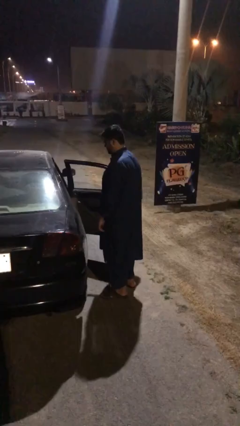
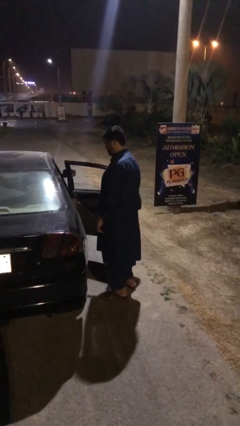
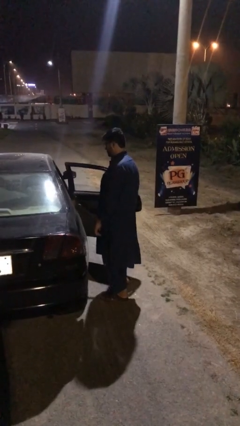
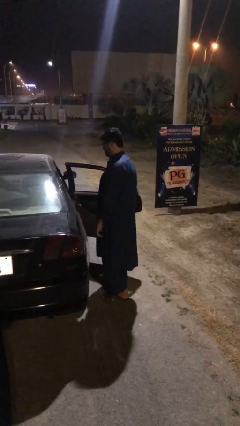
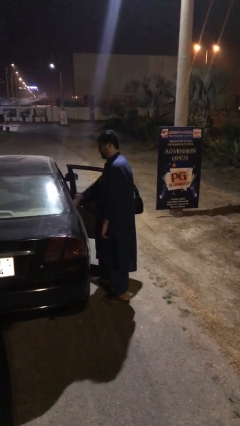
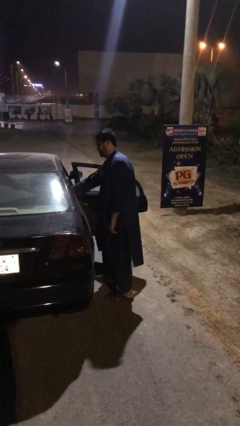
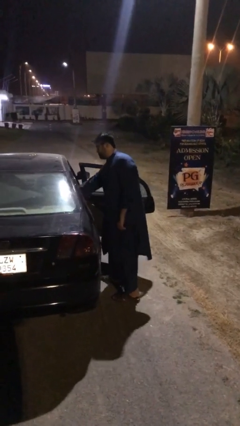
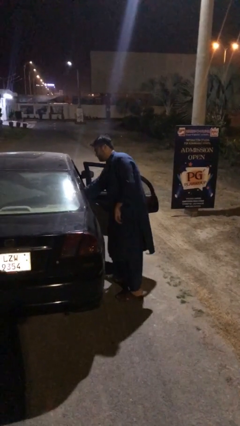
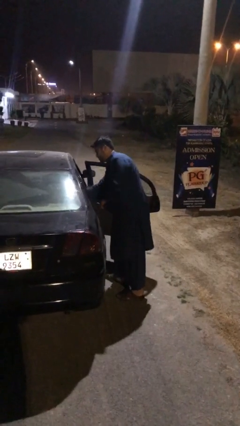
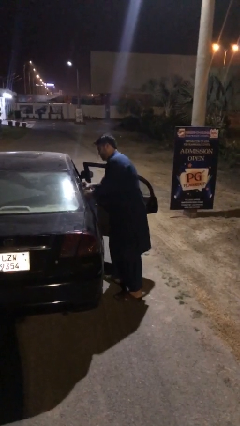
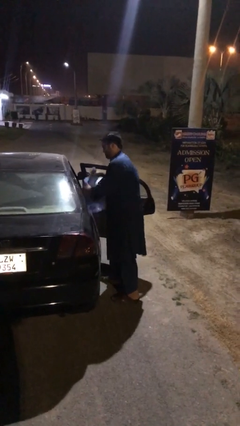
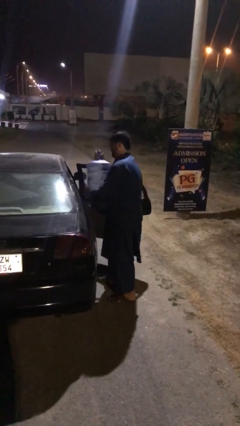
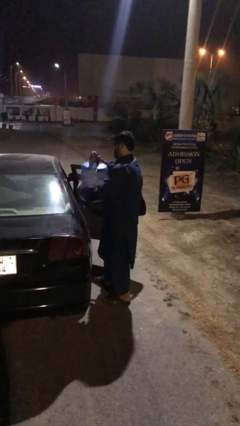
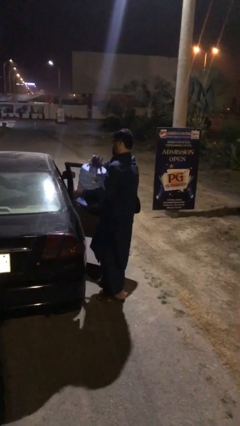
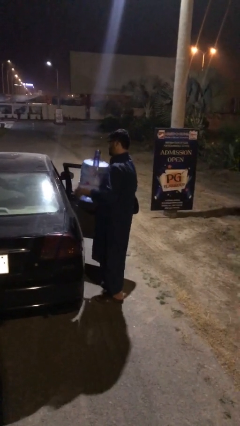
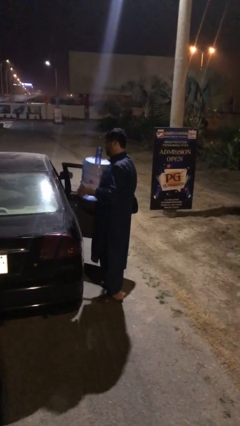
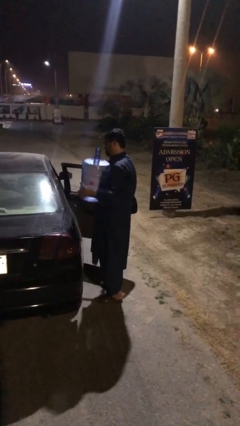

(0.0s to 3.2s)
person unloads car

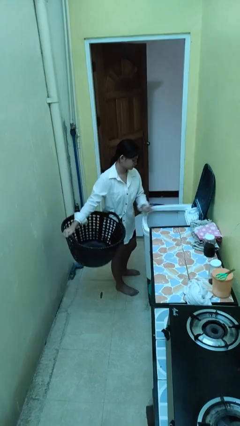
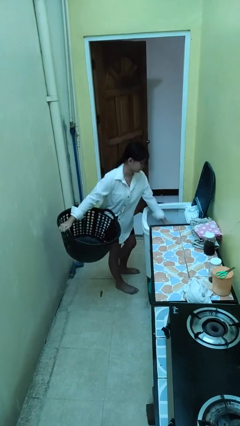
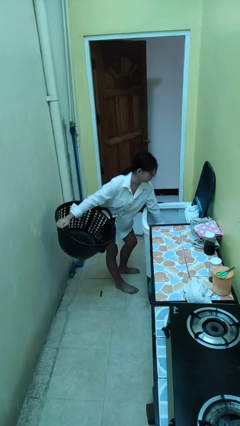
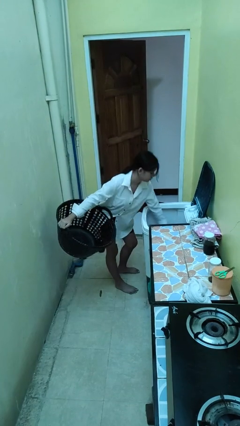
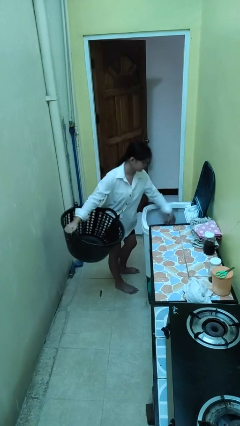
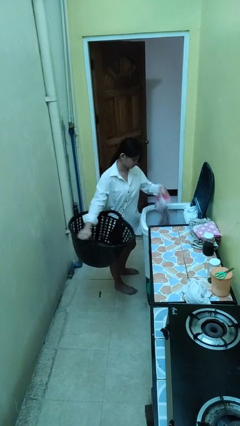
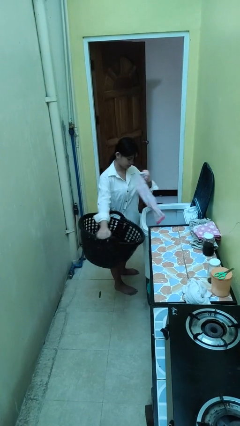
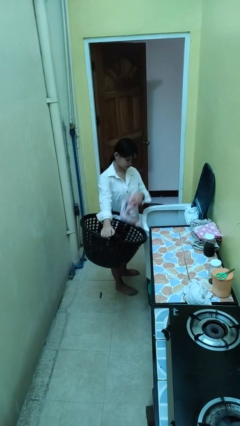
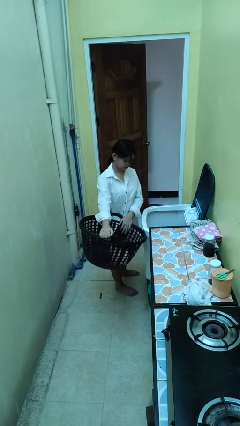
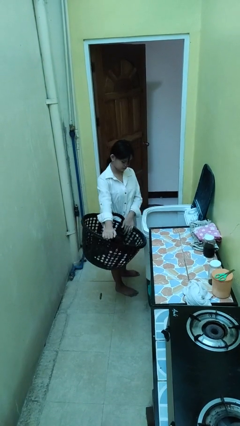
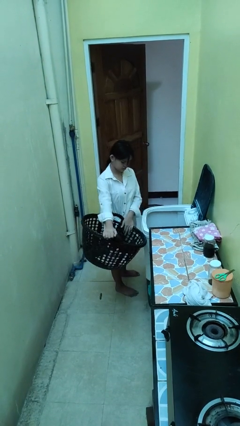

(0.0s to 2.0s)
person loads clotheswasher

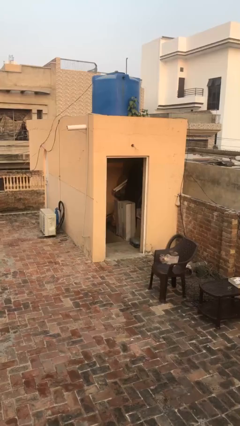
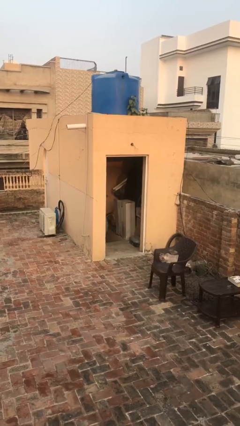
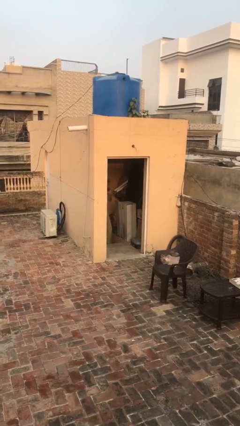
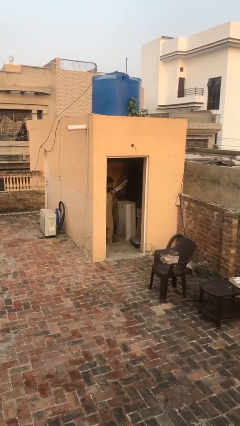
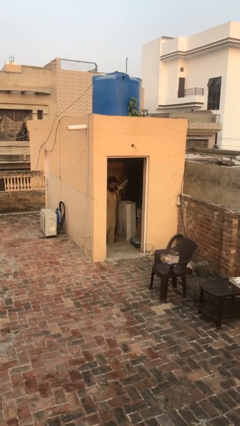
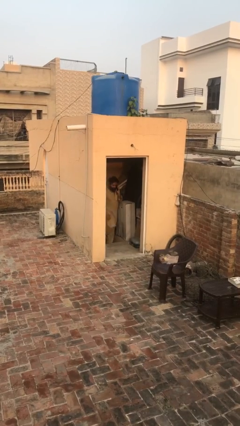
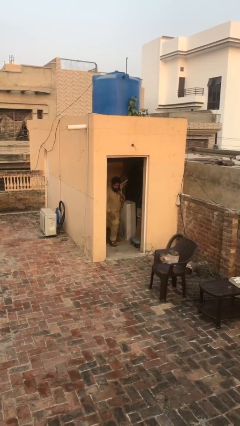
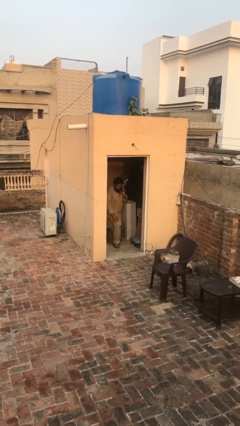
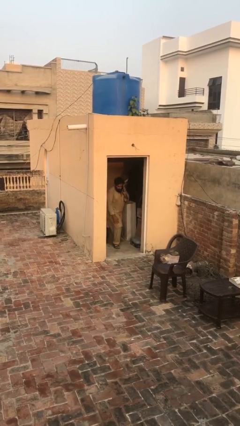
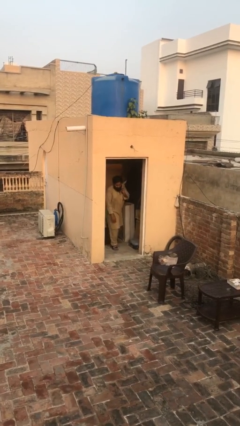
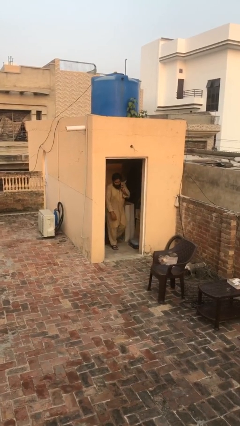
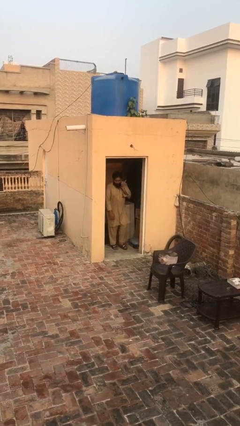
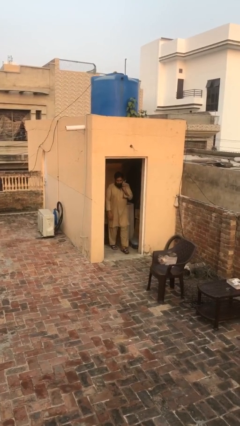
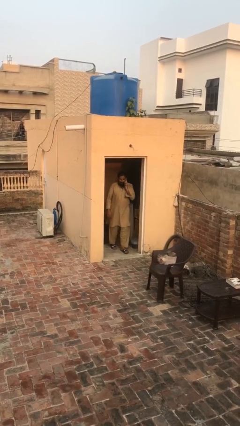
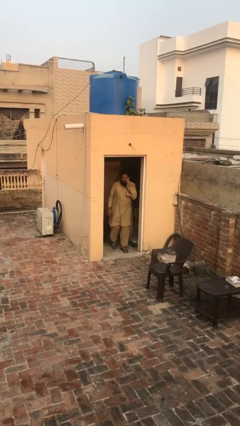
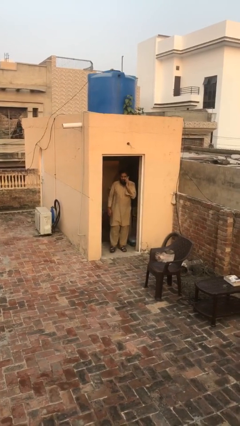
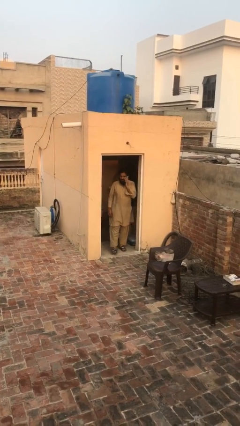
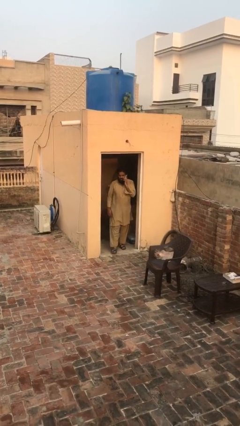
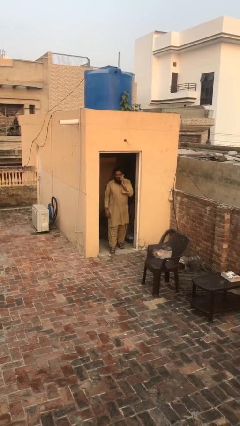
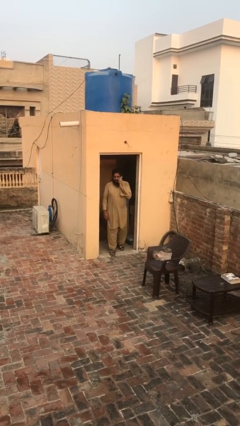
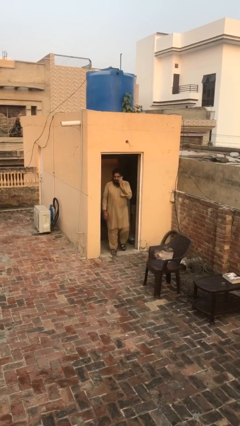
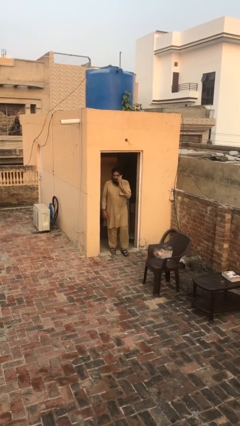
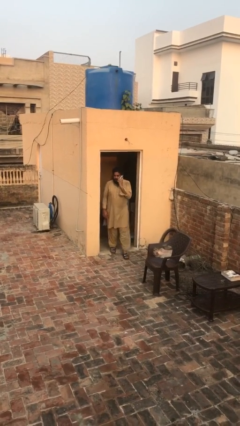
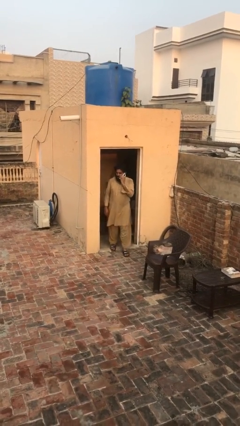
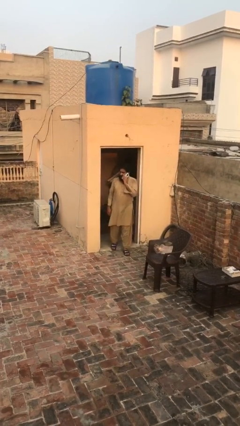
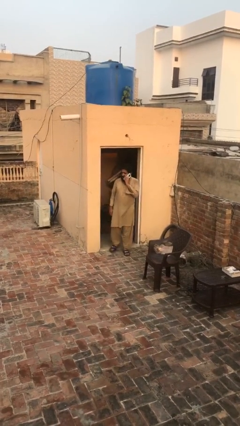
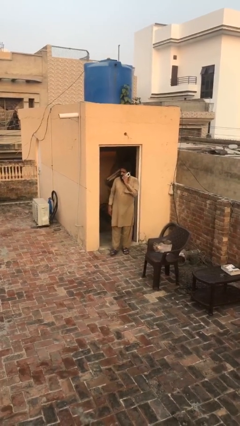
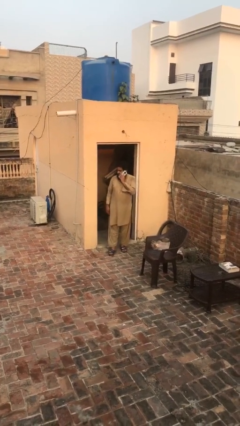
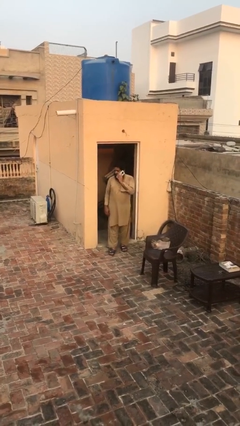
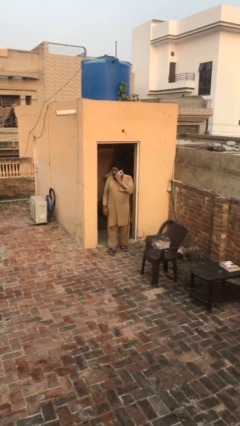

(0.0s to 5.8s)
person enters scene through structure

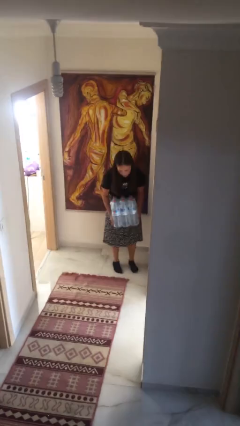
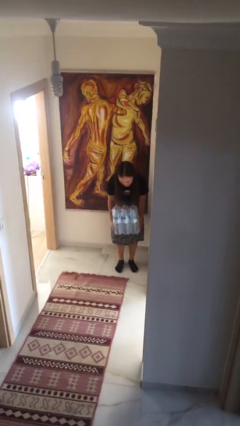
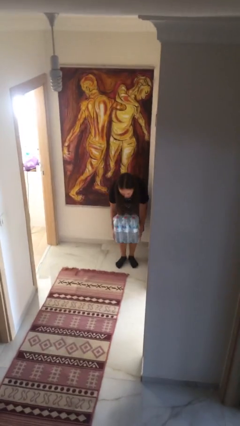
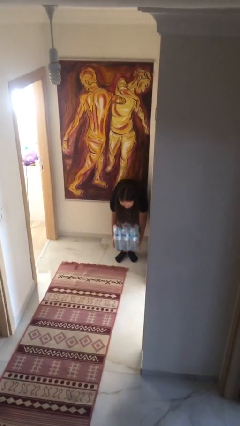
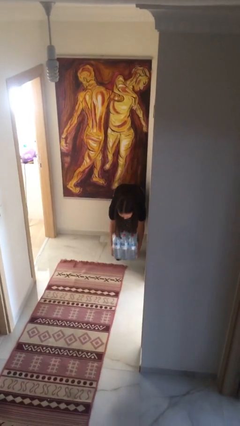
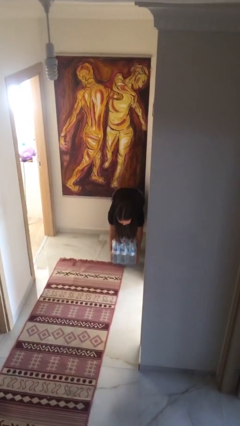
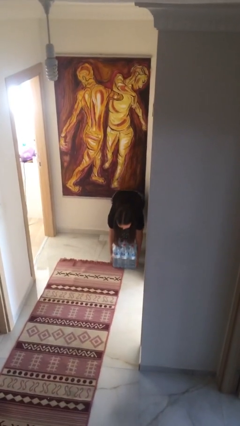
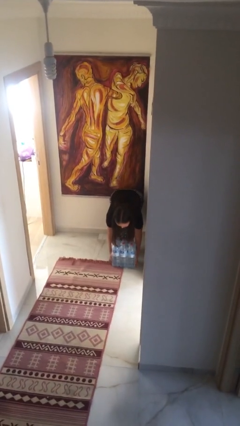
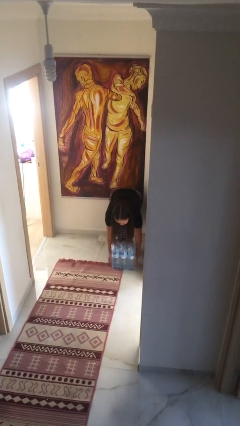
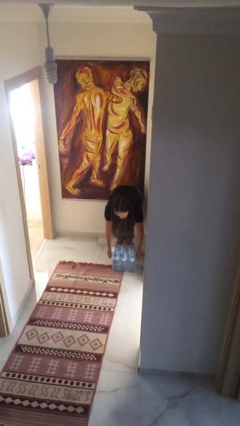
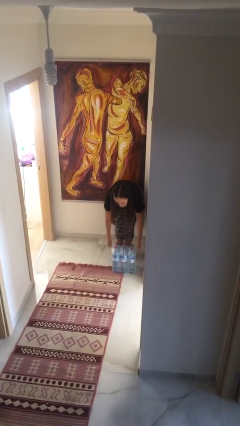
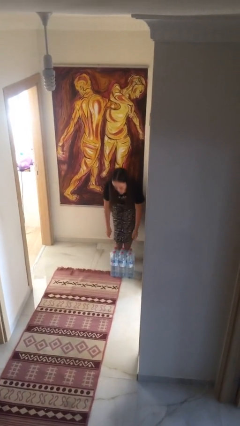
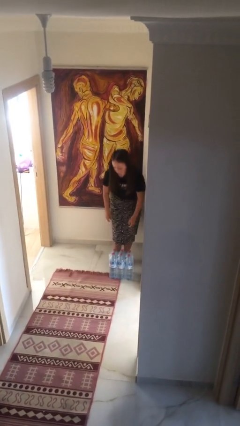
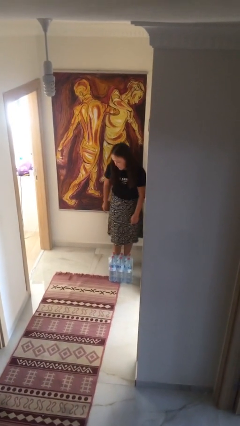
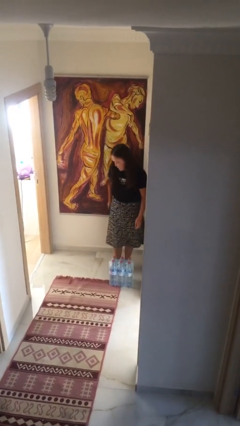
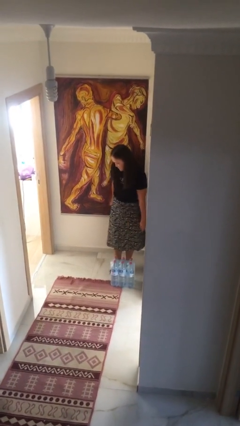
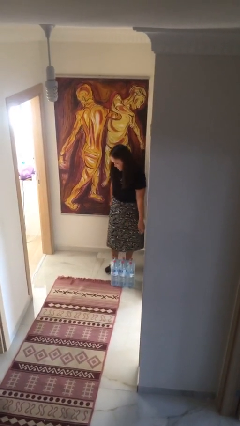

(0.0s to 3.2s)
person puts down object on floor

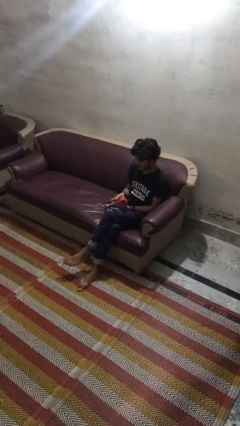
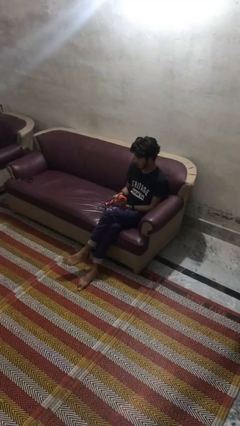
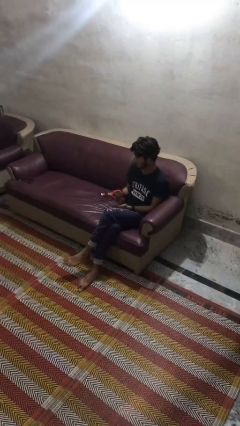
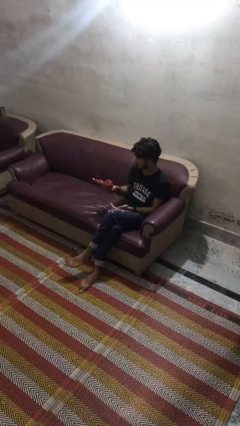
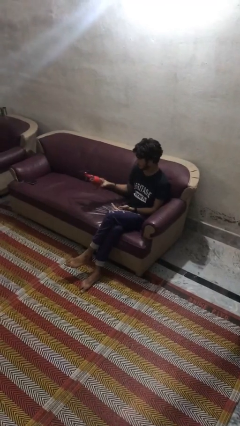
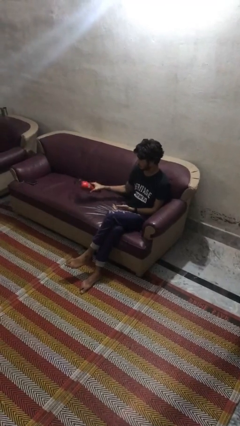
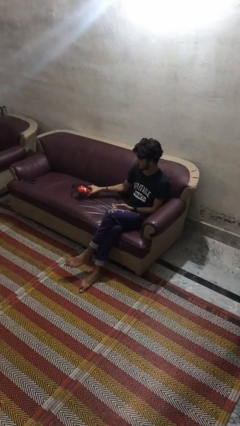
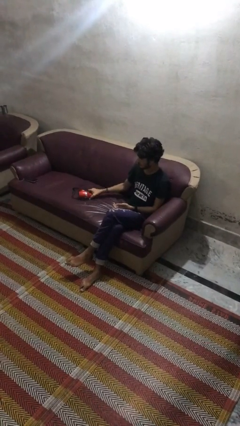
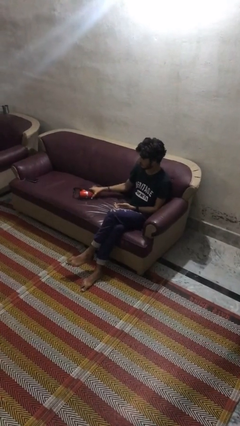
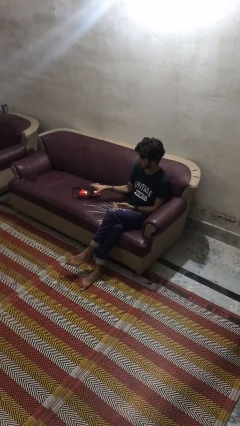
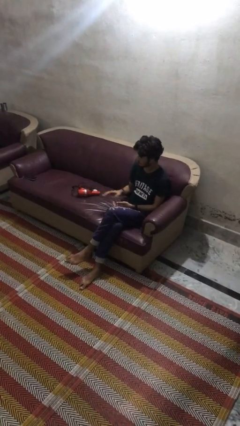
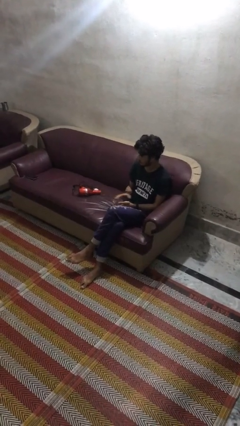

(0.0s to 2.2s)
person puts down object on couch

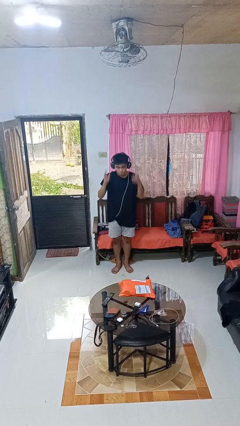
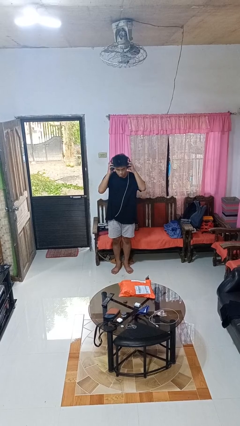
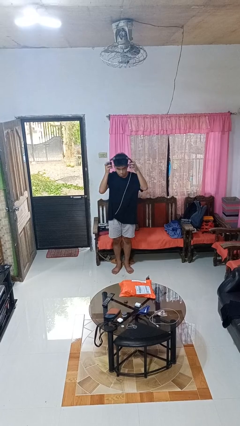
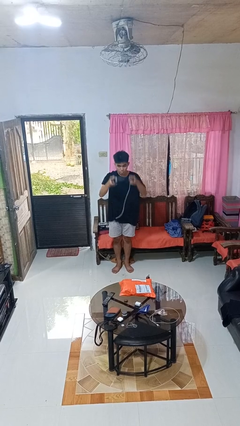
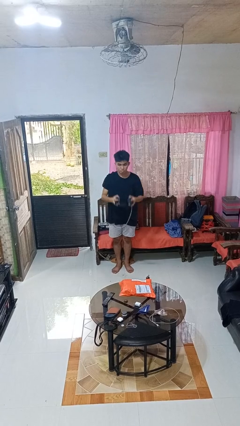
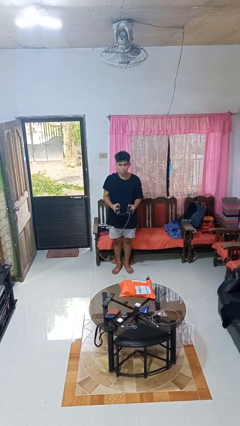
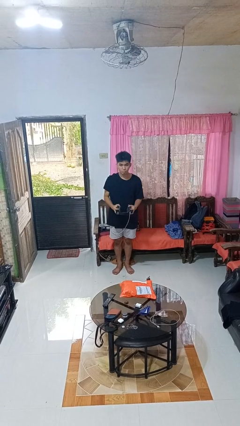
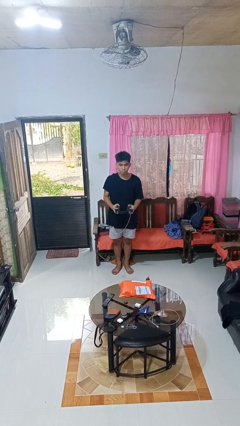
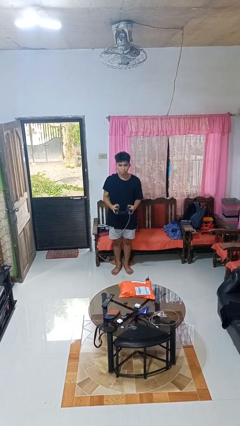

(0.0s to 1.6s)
person takes off headphones
